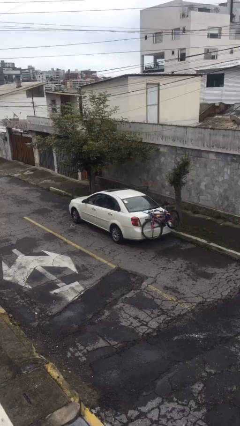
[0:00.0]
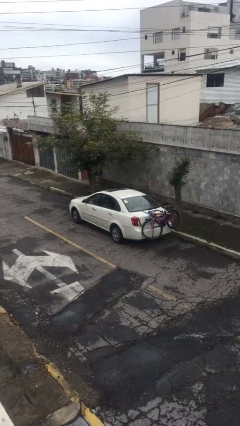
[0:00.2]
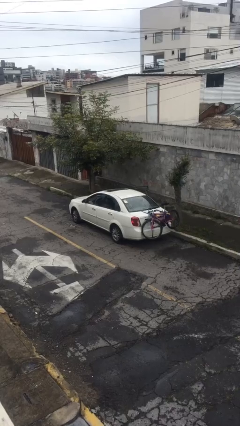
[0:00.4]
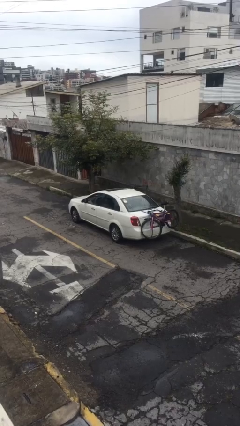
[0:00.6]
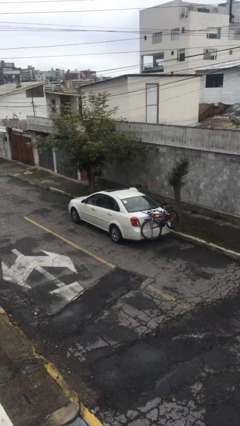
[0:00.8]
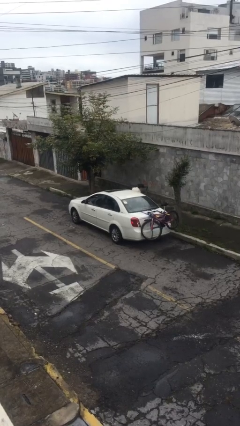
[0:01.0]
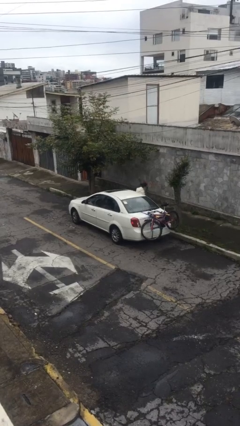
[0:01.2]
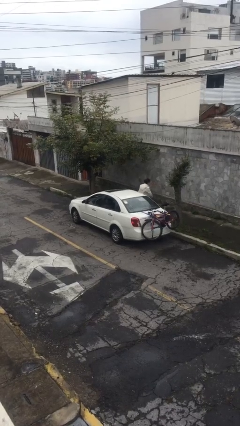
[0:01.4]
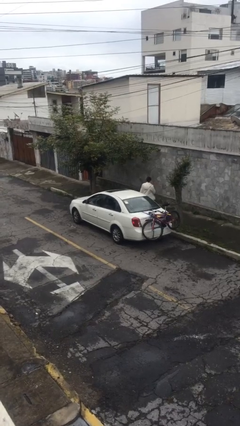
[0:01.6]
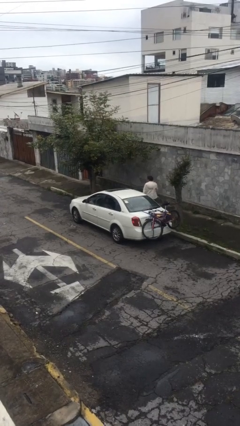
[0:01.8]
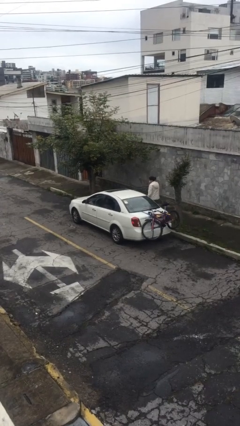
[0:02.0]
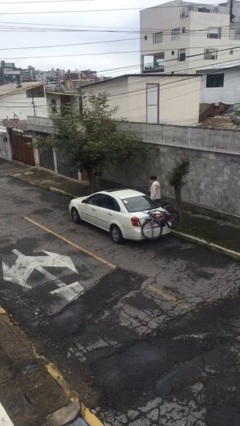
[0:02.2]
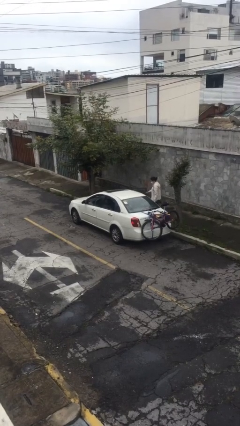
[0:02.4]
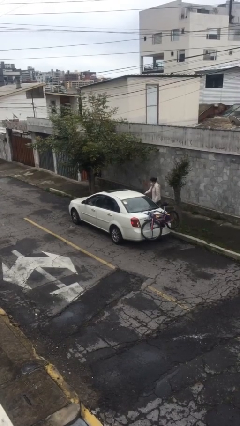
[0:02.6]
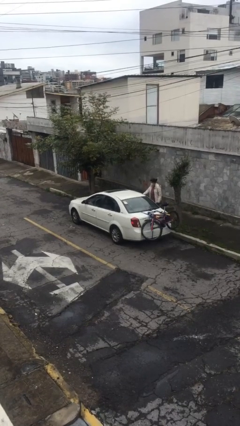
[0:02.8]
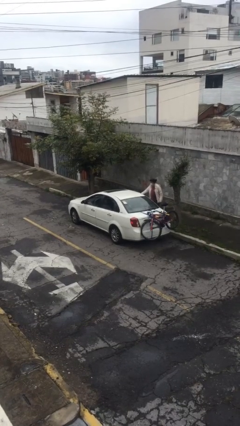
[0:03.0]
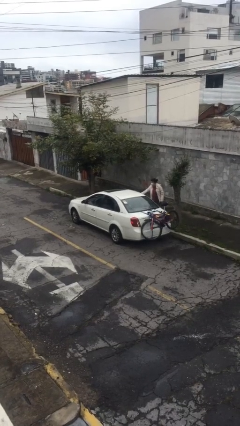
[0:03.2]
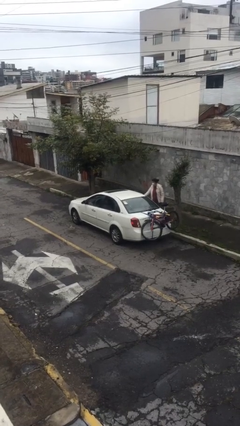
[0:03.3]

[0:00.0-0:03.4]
car drops off person

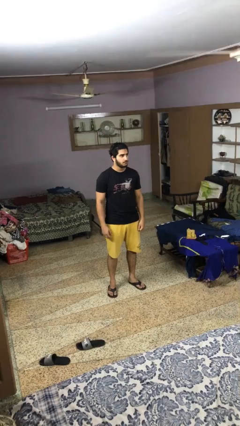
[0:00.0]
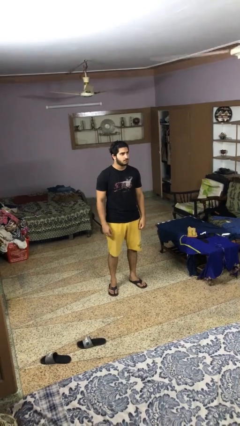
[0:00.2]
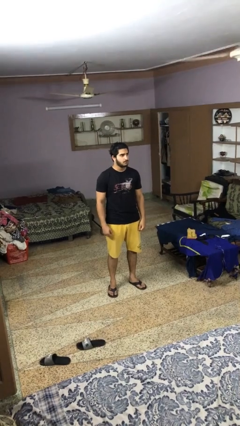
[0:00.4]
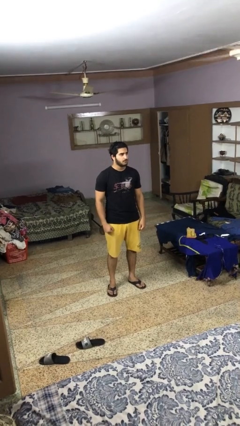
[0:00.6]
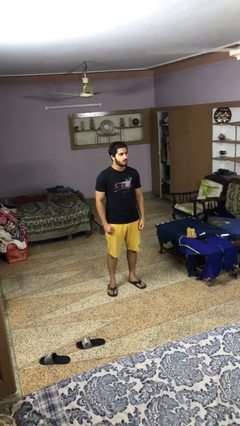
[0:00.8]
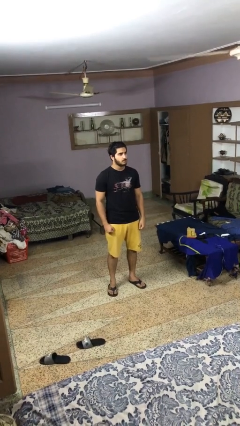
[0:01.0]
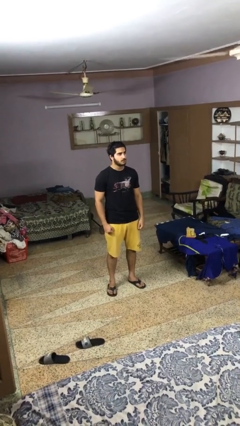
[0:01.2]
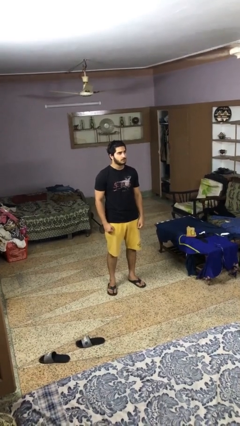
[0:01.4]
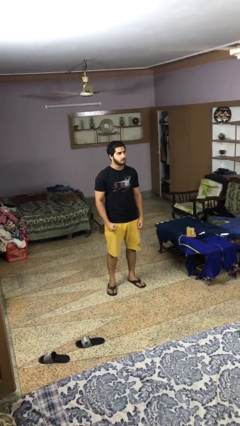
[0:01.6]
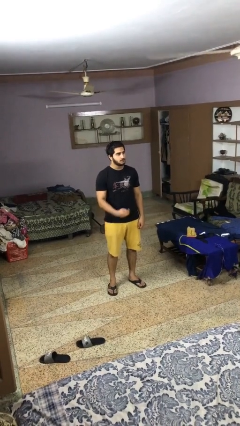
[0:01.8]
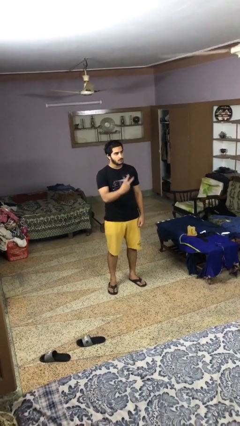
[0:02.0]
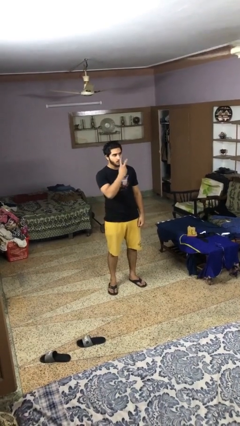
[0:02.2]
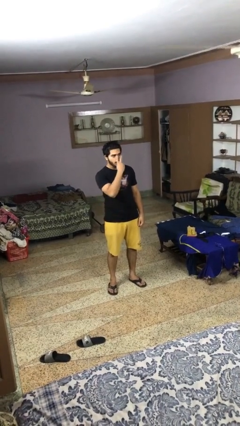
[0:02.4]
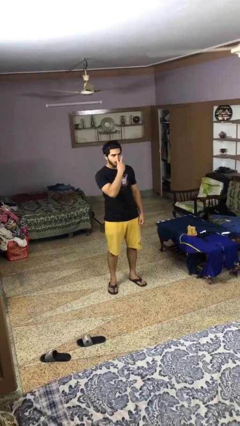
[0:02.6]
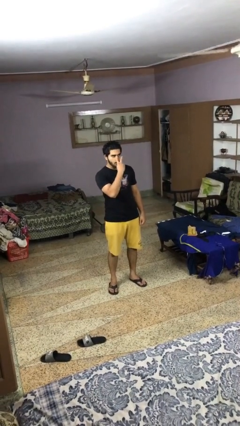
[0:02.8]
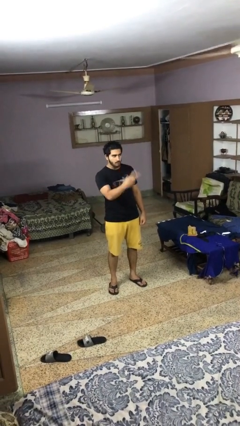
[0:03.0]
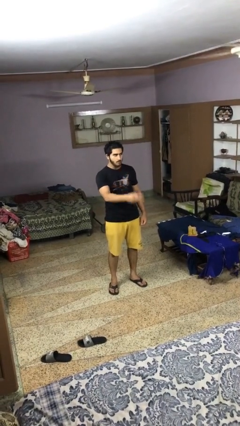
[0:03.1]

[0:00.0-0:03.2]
person gestures watch closely

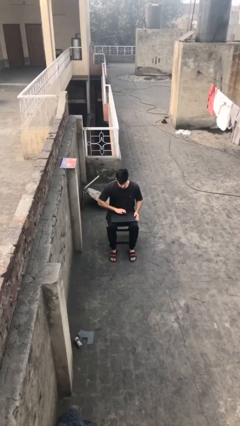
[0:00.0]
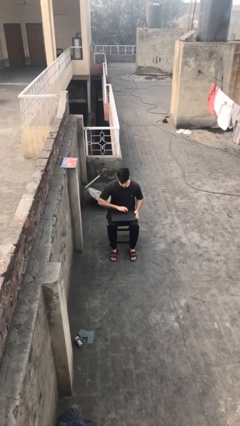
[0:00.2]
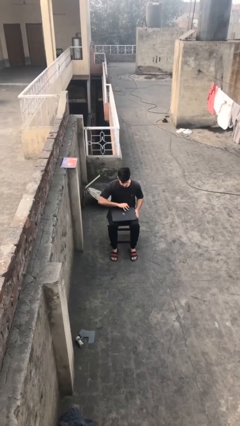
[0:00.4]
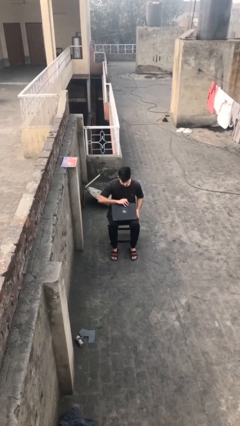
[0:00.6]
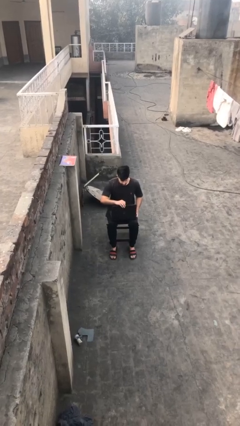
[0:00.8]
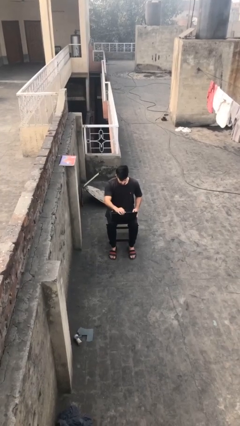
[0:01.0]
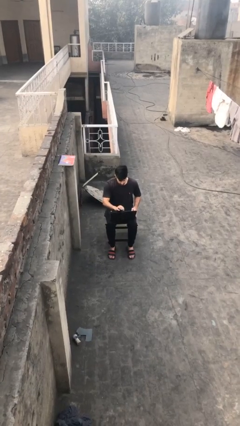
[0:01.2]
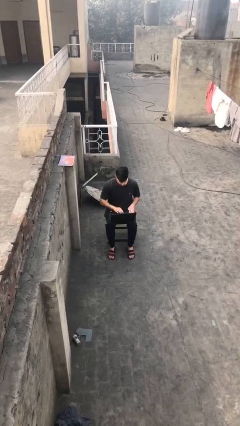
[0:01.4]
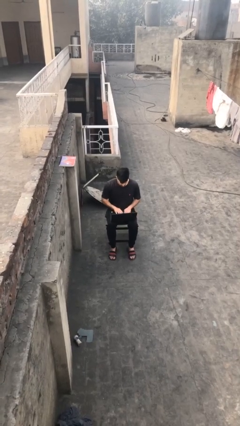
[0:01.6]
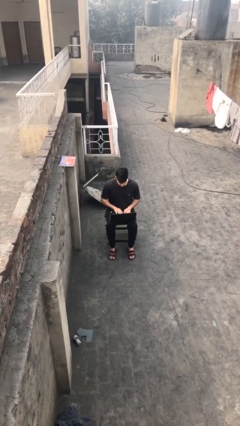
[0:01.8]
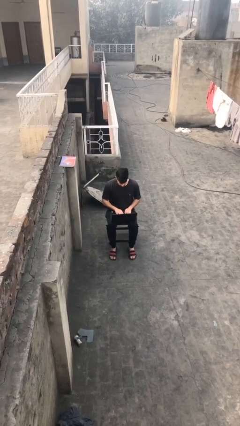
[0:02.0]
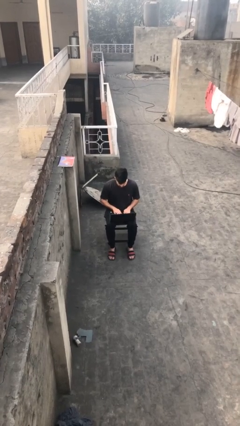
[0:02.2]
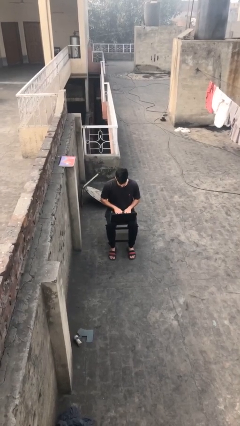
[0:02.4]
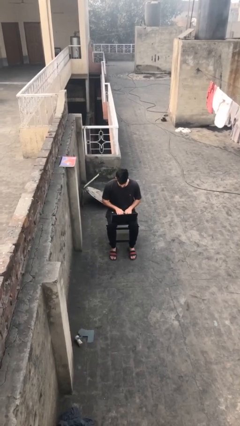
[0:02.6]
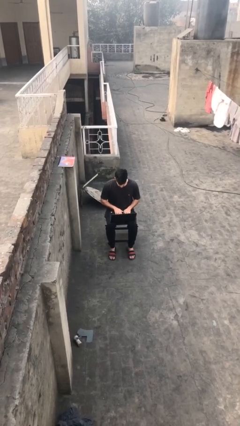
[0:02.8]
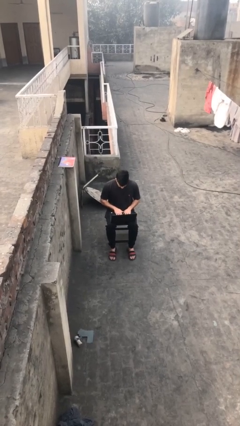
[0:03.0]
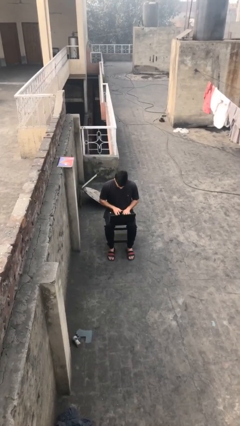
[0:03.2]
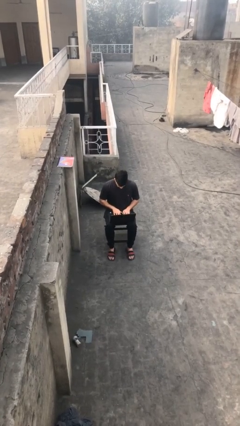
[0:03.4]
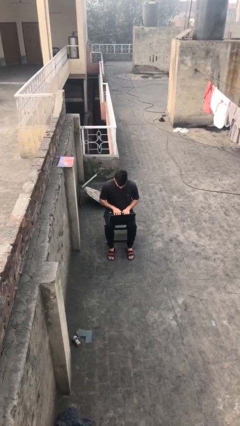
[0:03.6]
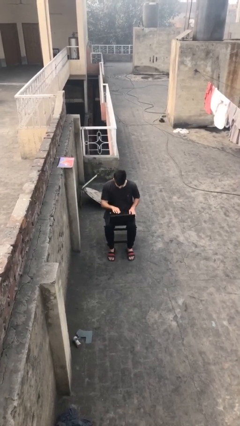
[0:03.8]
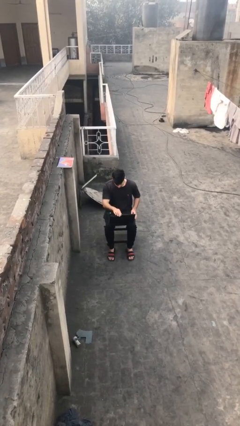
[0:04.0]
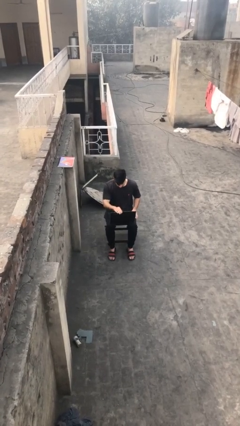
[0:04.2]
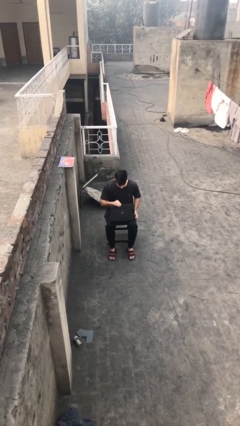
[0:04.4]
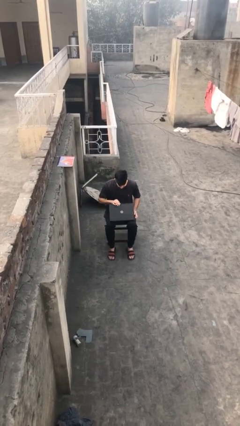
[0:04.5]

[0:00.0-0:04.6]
person interacts with laptop

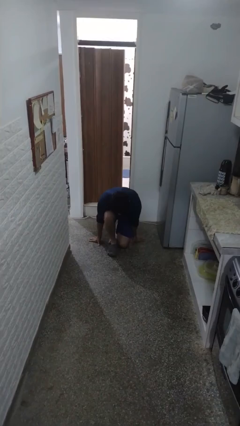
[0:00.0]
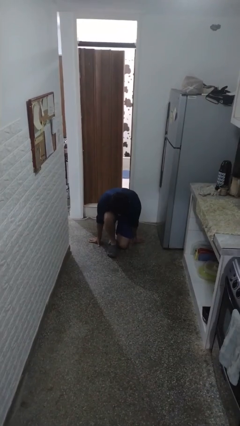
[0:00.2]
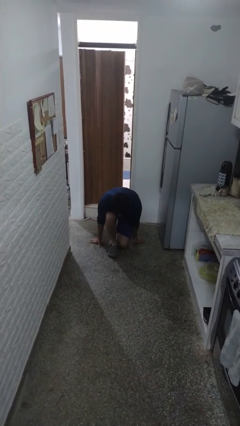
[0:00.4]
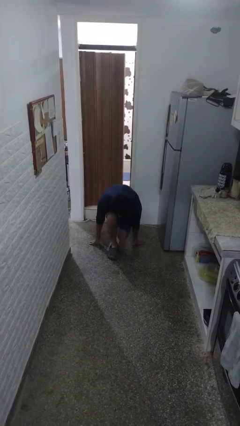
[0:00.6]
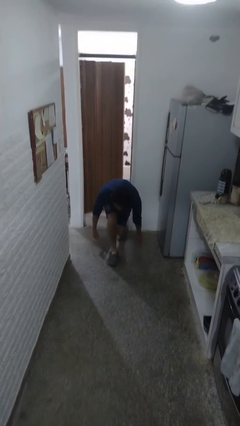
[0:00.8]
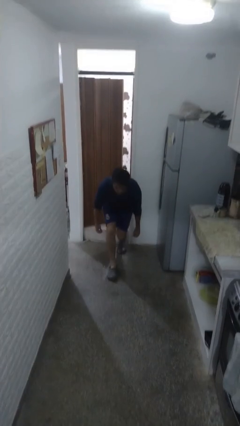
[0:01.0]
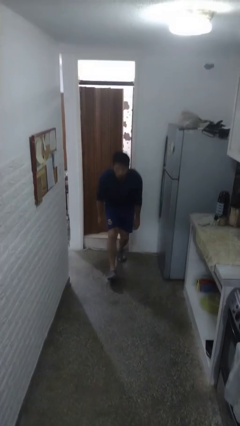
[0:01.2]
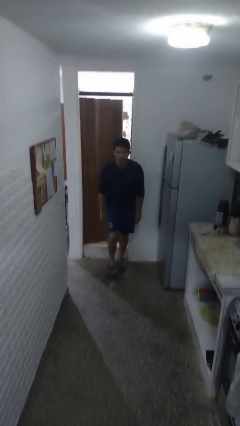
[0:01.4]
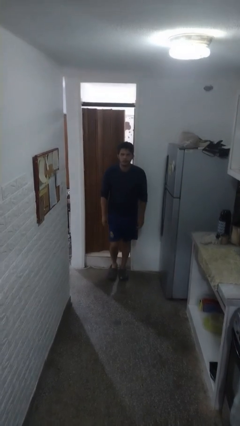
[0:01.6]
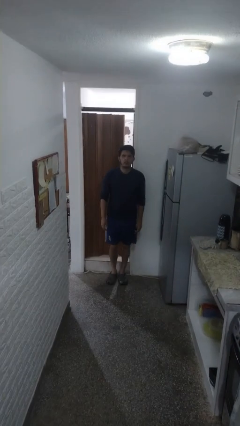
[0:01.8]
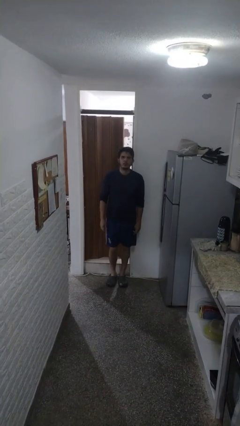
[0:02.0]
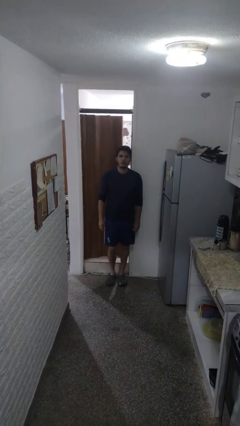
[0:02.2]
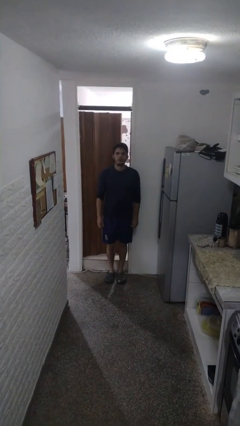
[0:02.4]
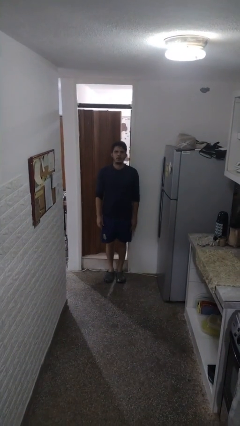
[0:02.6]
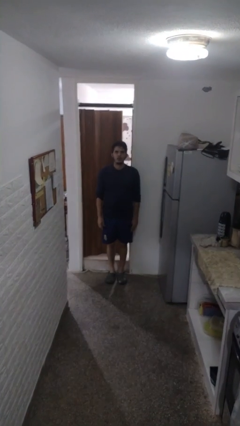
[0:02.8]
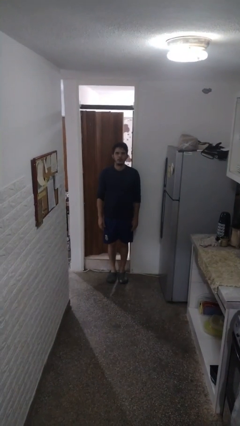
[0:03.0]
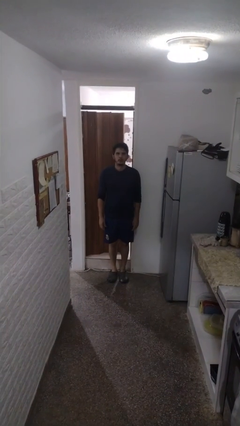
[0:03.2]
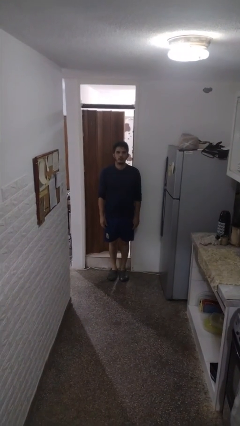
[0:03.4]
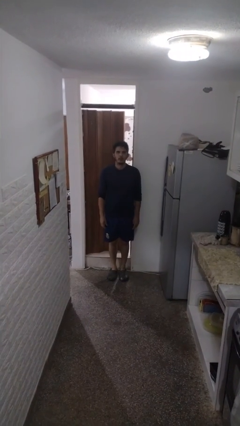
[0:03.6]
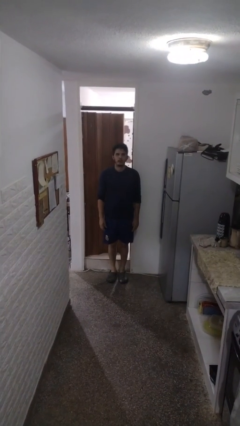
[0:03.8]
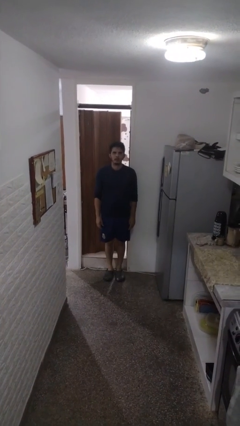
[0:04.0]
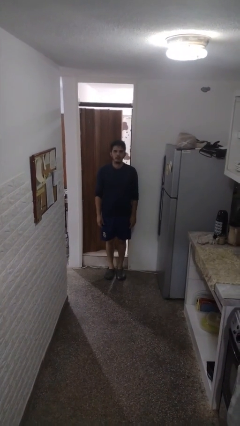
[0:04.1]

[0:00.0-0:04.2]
person stands up from floor

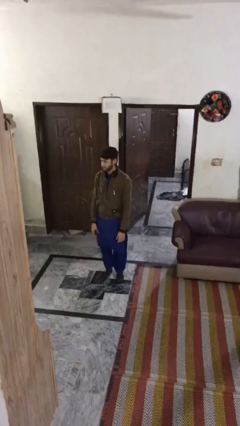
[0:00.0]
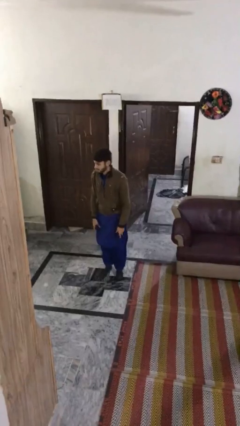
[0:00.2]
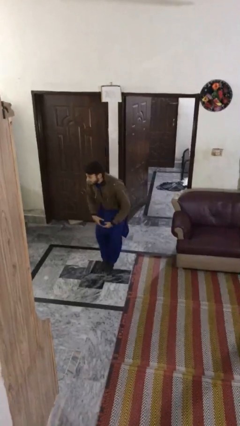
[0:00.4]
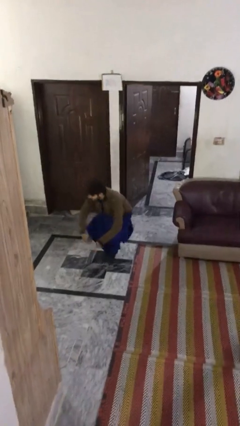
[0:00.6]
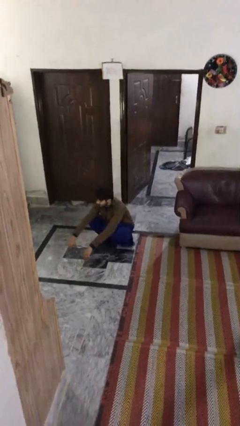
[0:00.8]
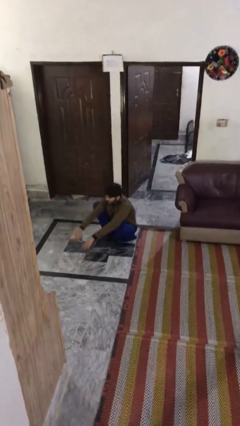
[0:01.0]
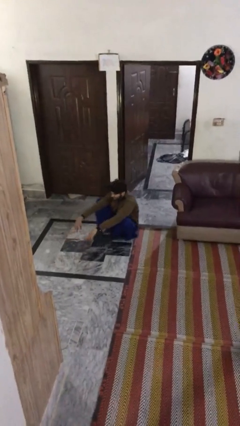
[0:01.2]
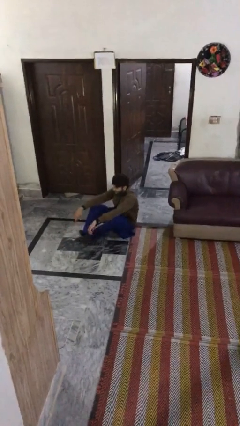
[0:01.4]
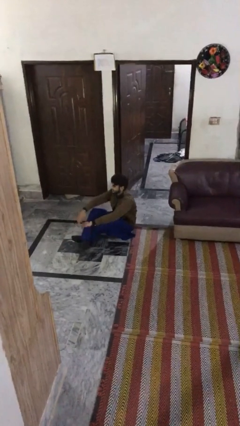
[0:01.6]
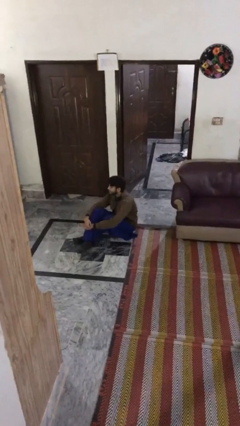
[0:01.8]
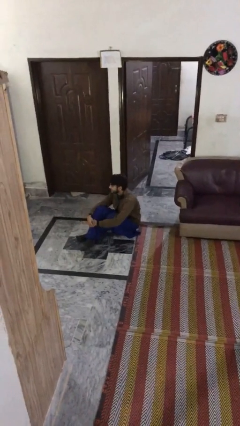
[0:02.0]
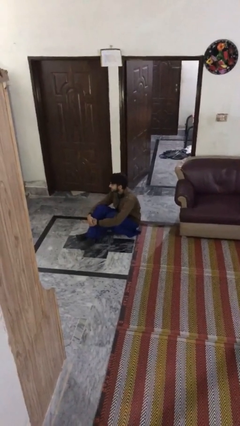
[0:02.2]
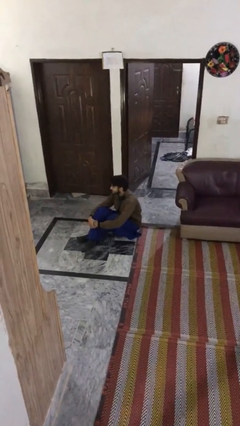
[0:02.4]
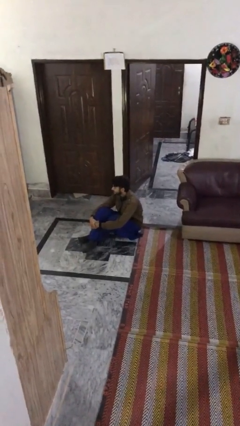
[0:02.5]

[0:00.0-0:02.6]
person sits down
